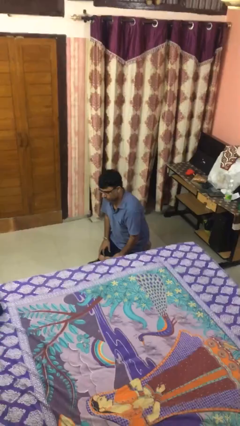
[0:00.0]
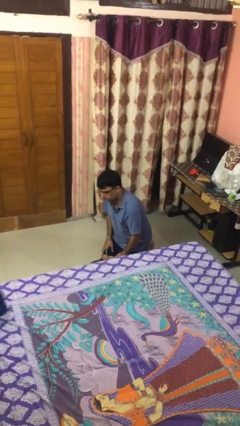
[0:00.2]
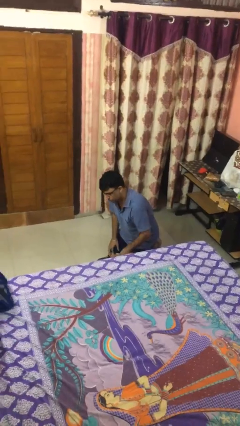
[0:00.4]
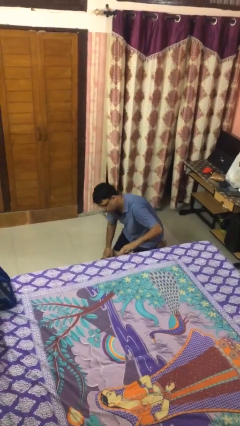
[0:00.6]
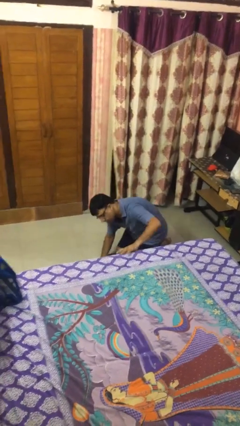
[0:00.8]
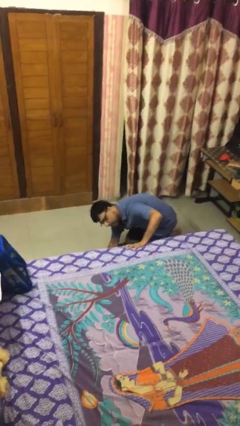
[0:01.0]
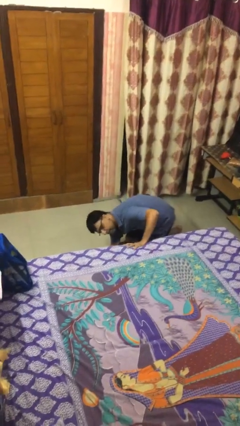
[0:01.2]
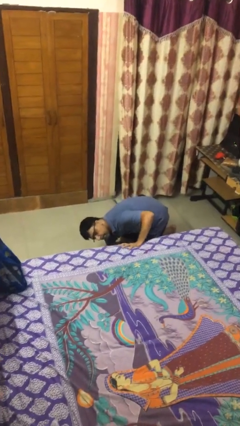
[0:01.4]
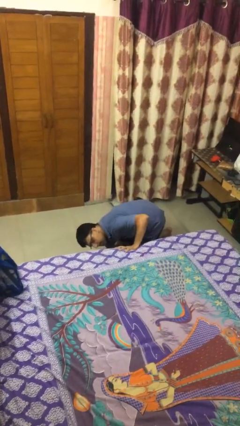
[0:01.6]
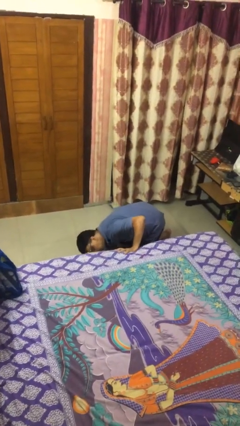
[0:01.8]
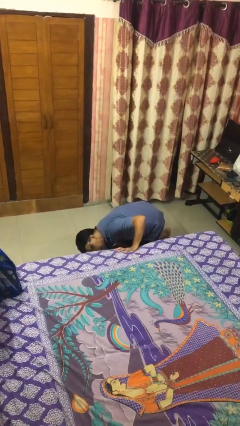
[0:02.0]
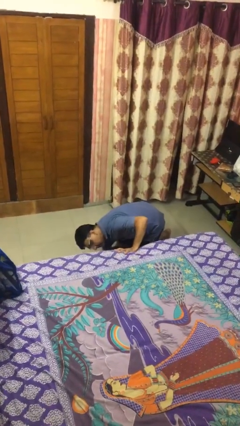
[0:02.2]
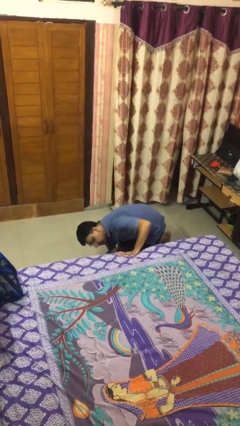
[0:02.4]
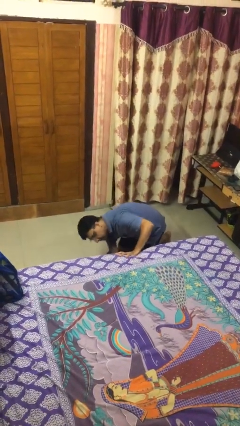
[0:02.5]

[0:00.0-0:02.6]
person searches under bed

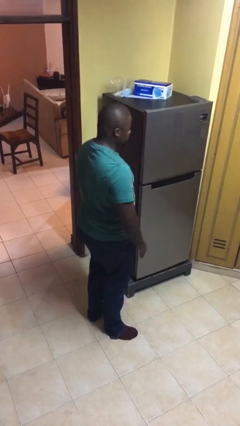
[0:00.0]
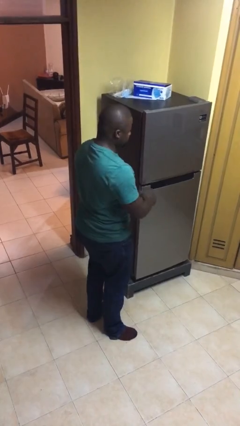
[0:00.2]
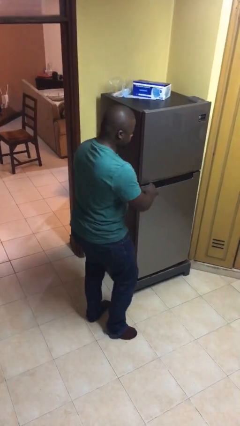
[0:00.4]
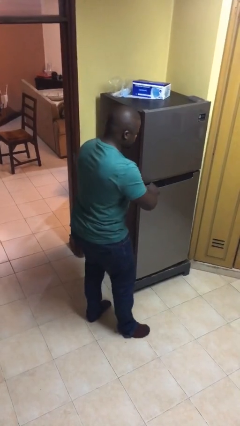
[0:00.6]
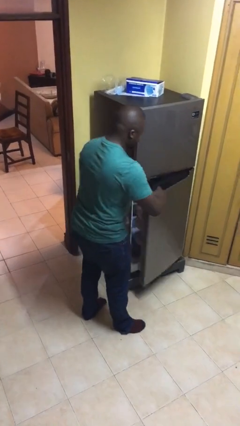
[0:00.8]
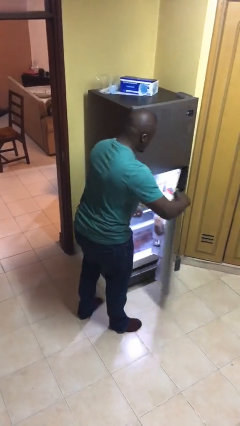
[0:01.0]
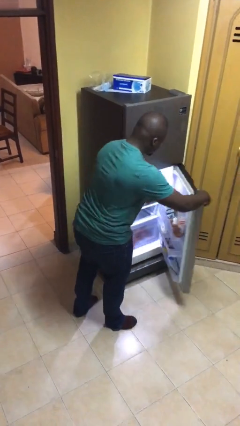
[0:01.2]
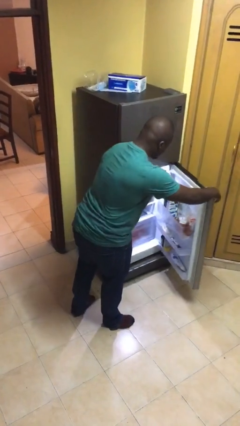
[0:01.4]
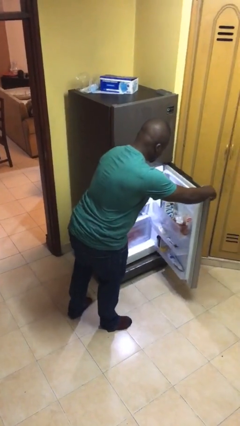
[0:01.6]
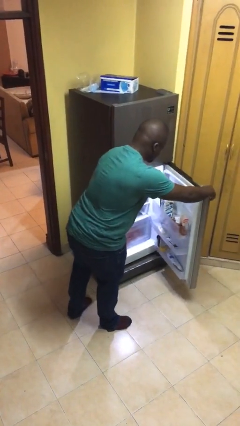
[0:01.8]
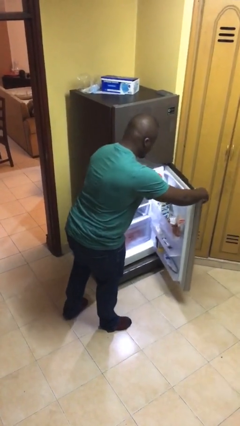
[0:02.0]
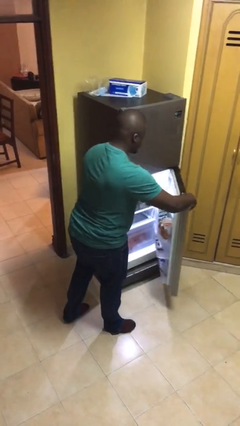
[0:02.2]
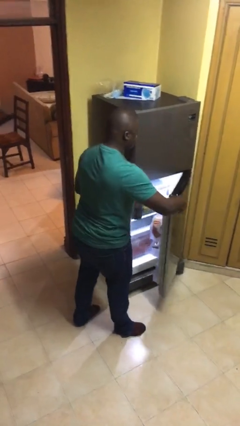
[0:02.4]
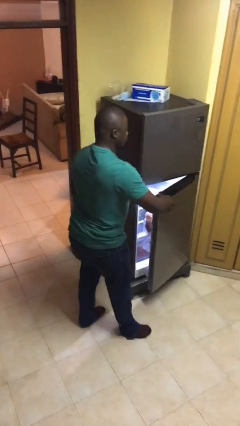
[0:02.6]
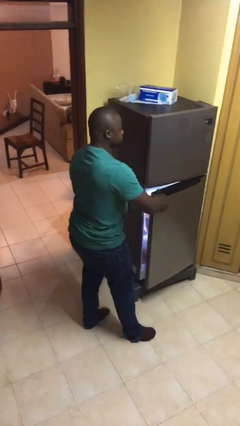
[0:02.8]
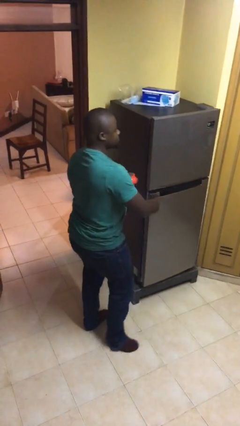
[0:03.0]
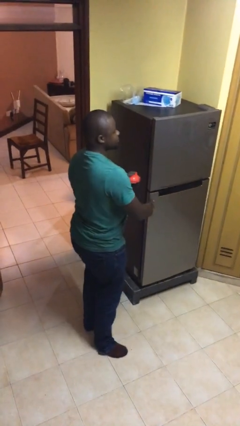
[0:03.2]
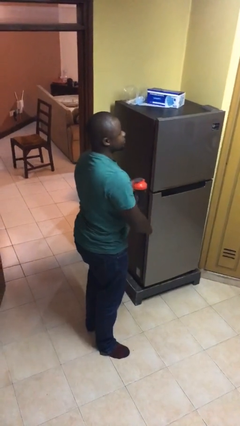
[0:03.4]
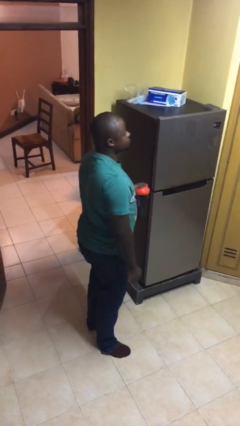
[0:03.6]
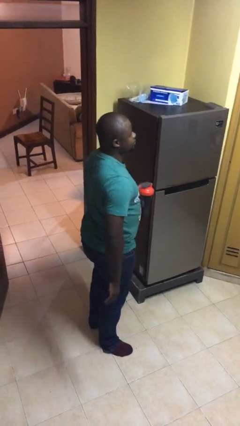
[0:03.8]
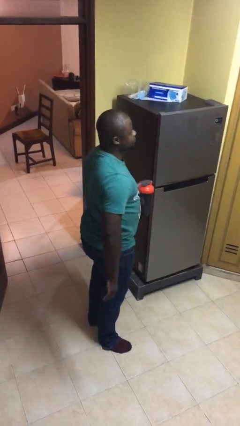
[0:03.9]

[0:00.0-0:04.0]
person takes object from refrigerator

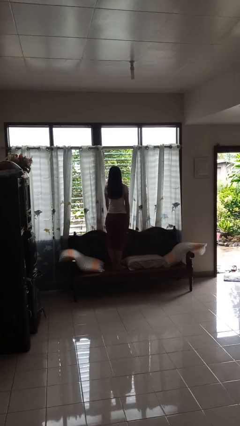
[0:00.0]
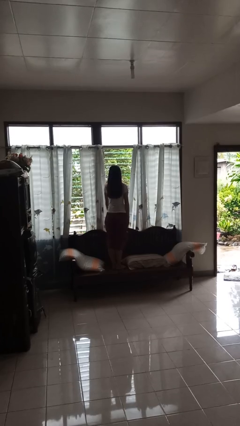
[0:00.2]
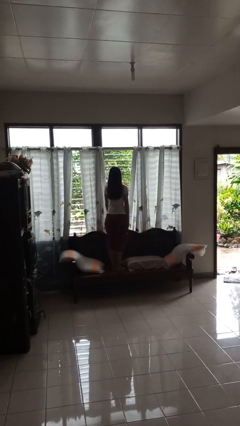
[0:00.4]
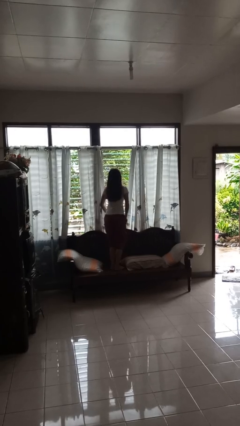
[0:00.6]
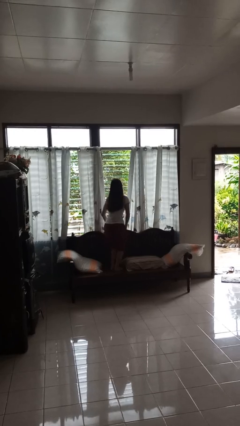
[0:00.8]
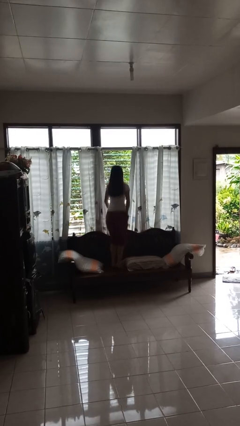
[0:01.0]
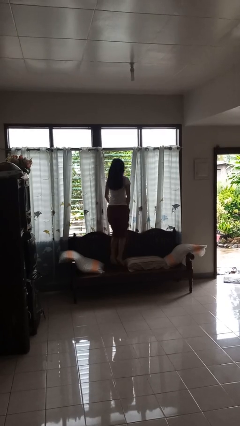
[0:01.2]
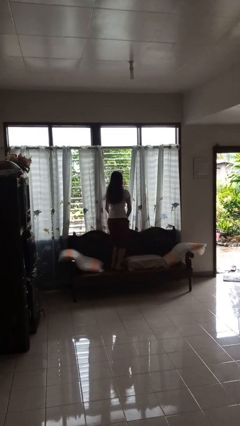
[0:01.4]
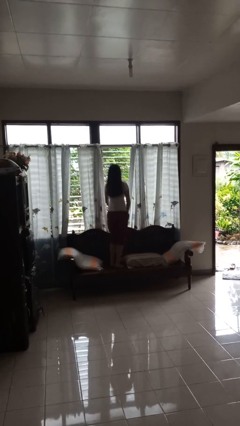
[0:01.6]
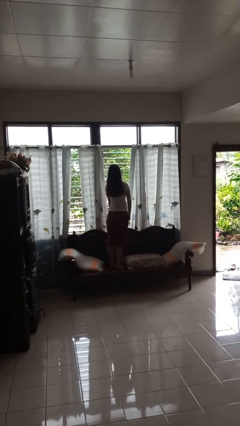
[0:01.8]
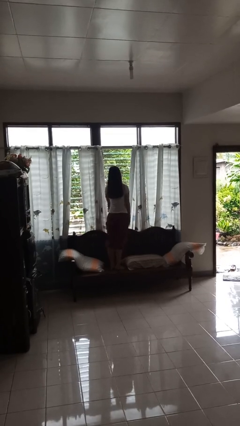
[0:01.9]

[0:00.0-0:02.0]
person jumps on couch

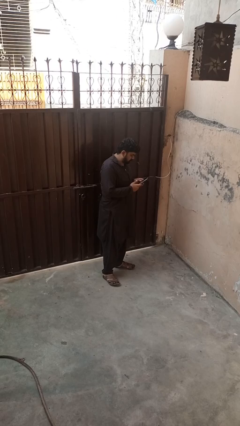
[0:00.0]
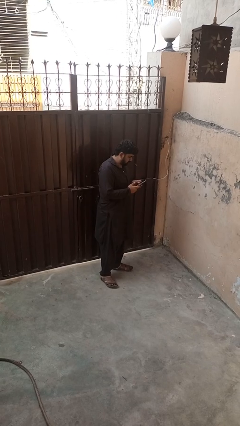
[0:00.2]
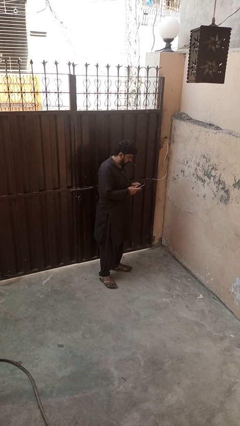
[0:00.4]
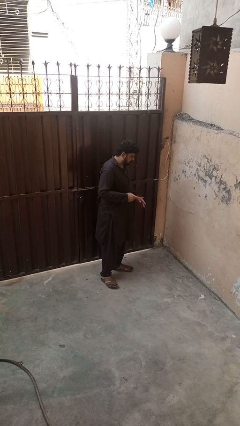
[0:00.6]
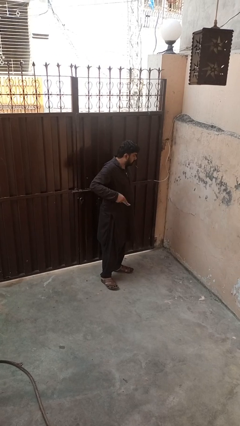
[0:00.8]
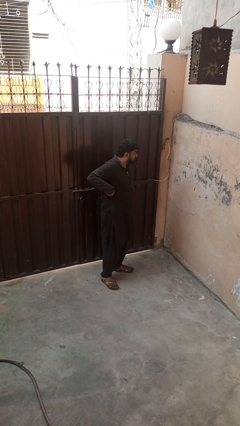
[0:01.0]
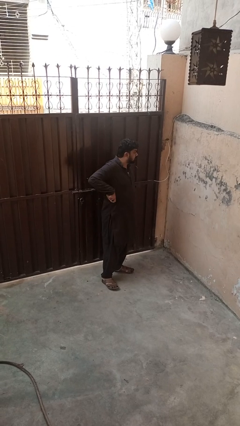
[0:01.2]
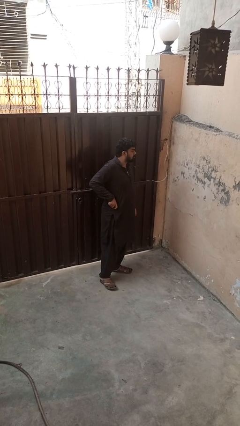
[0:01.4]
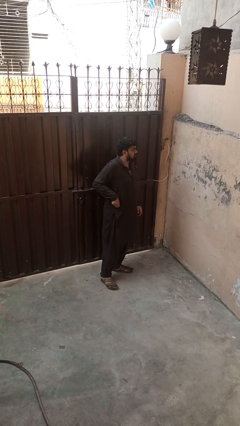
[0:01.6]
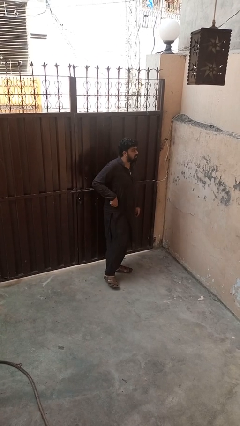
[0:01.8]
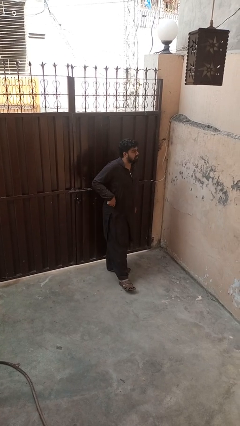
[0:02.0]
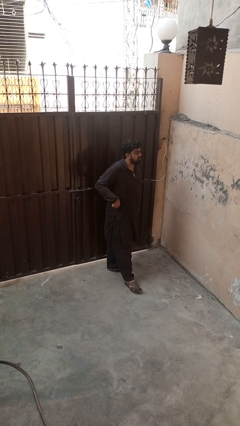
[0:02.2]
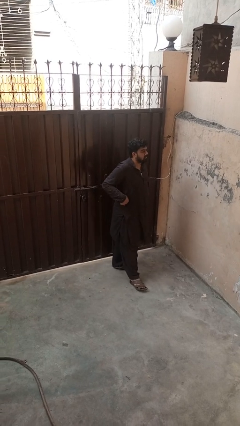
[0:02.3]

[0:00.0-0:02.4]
person puts phone into pocket

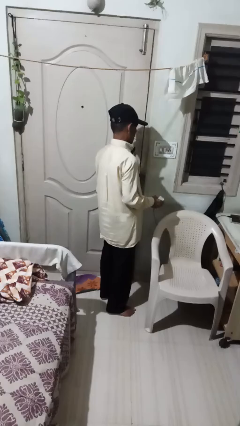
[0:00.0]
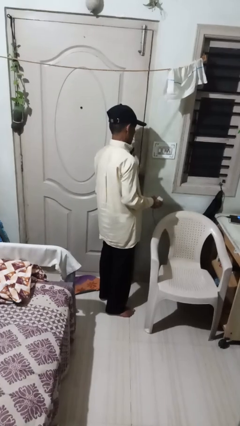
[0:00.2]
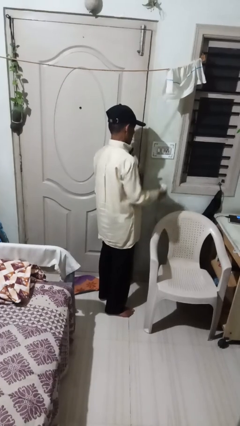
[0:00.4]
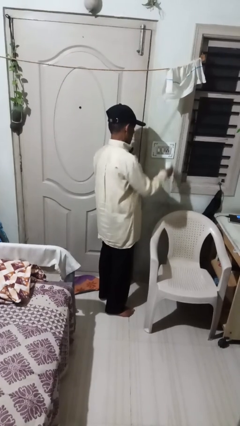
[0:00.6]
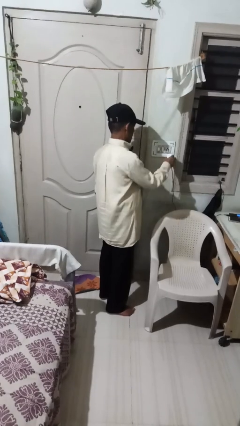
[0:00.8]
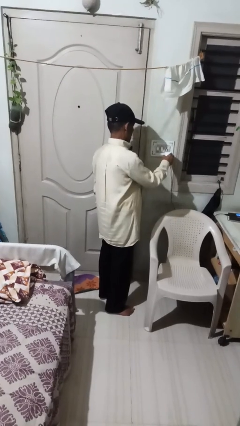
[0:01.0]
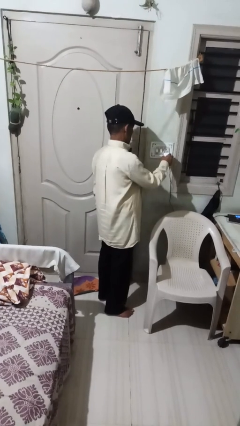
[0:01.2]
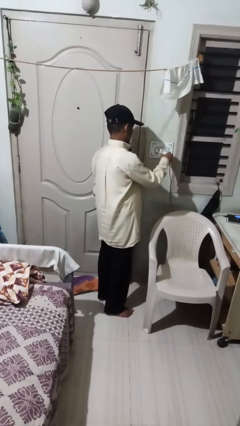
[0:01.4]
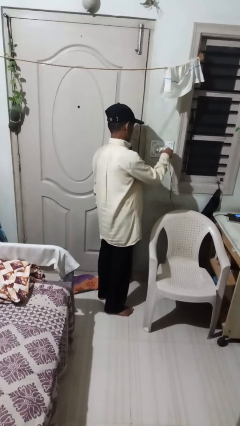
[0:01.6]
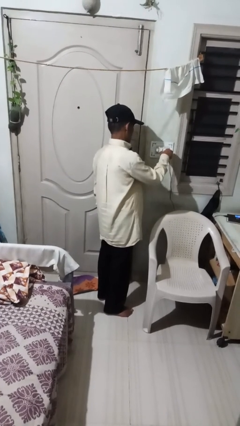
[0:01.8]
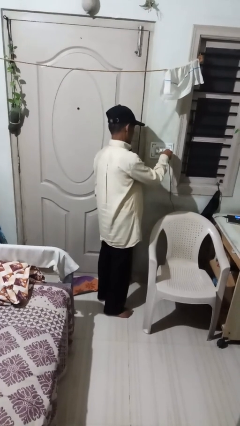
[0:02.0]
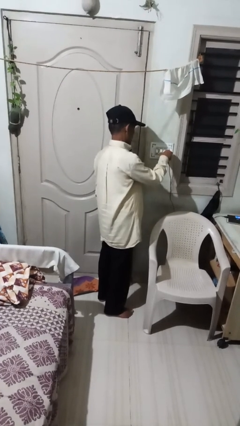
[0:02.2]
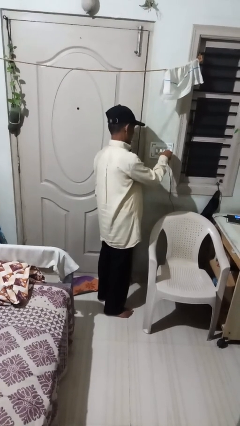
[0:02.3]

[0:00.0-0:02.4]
person plugs into electrical socket

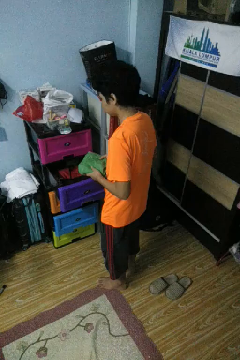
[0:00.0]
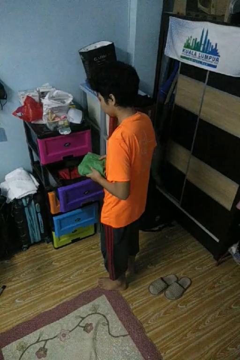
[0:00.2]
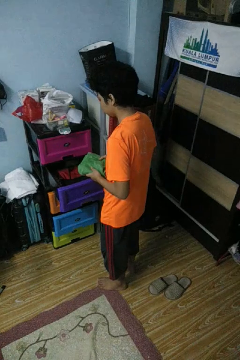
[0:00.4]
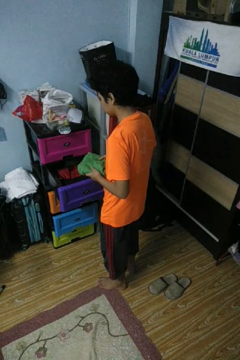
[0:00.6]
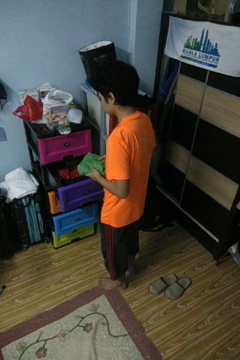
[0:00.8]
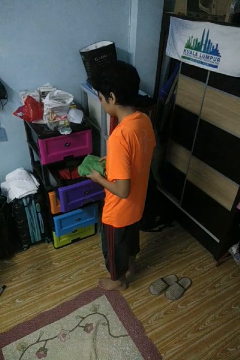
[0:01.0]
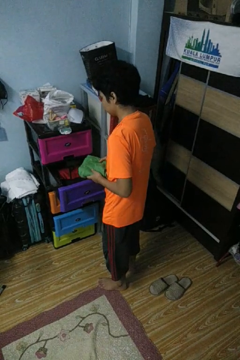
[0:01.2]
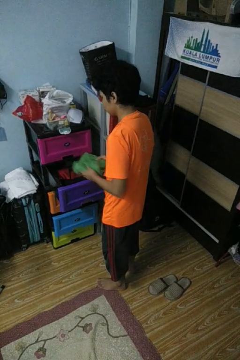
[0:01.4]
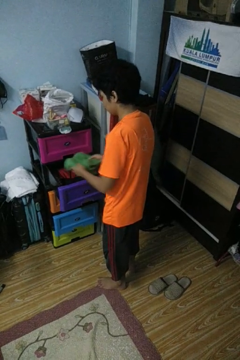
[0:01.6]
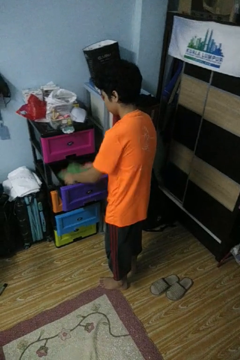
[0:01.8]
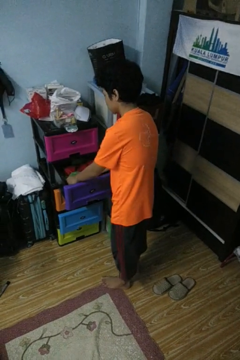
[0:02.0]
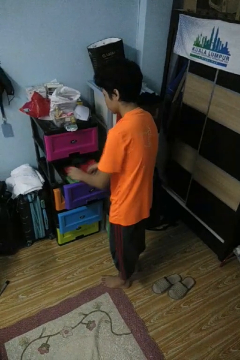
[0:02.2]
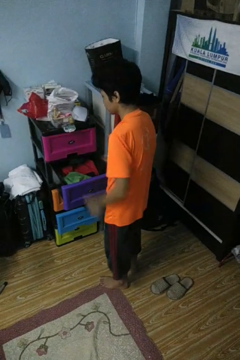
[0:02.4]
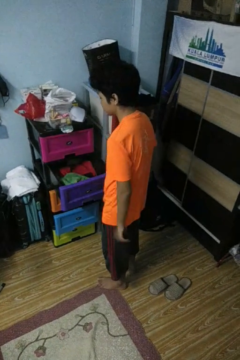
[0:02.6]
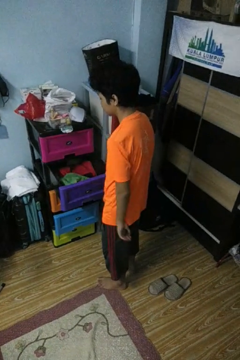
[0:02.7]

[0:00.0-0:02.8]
person puts clothes into dresser

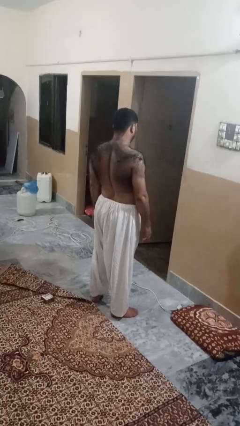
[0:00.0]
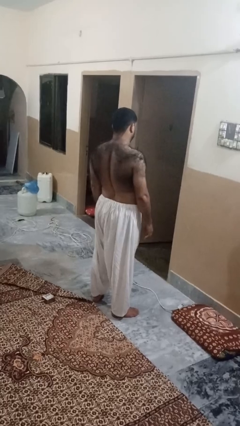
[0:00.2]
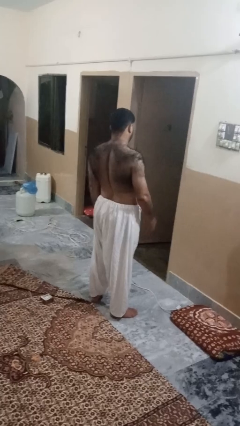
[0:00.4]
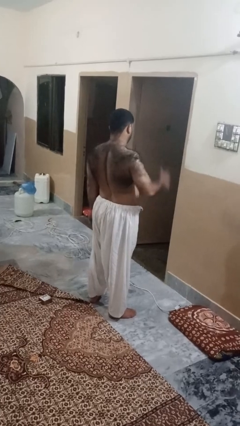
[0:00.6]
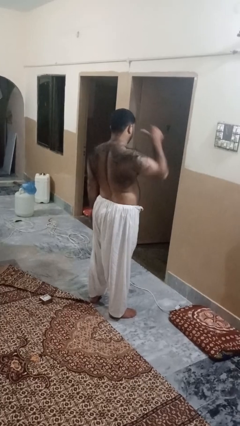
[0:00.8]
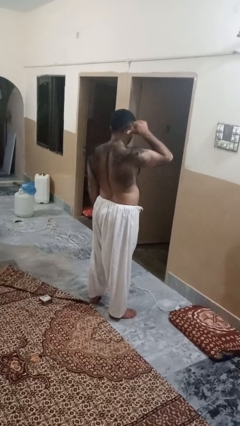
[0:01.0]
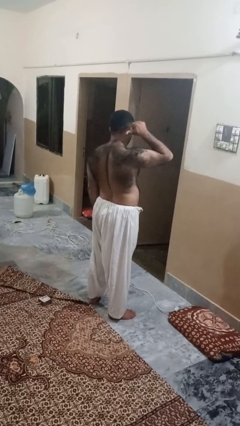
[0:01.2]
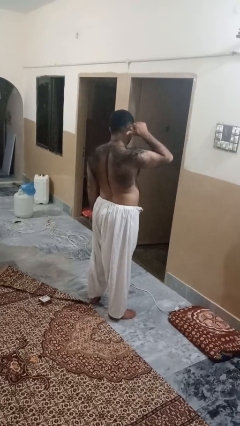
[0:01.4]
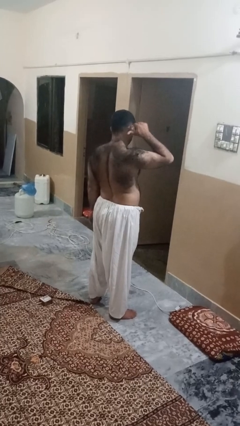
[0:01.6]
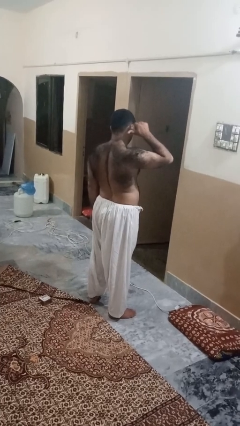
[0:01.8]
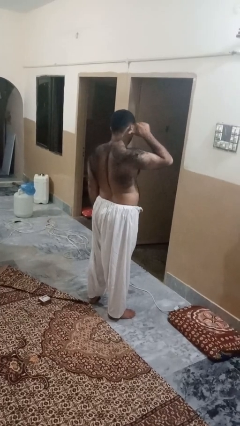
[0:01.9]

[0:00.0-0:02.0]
person gestures behind me
